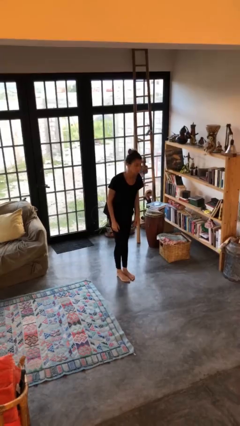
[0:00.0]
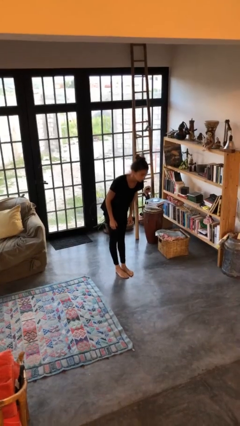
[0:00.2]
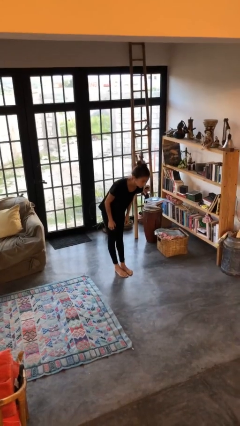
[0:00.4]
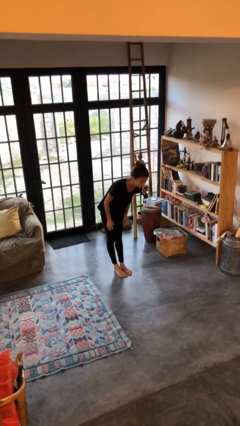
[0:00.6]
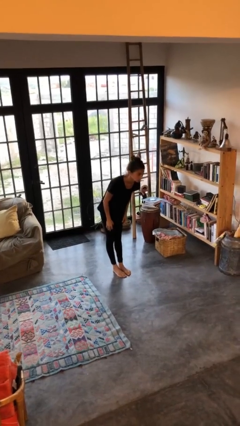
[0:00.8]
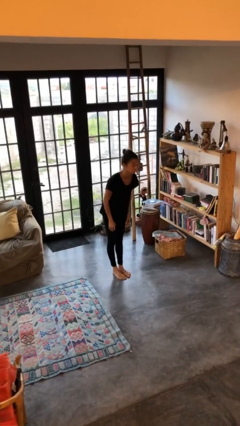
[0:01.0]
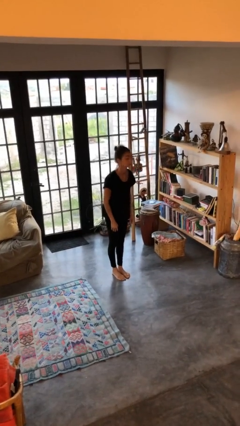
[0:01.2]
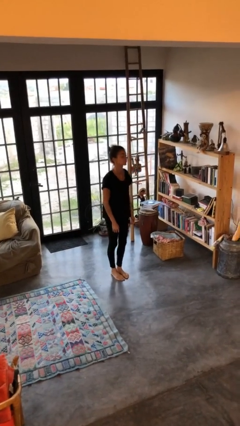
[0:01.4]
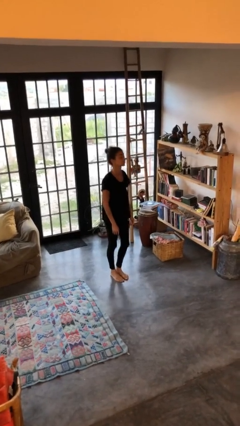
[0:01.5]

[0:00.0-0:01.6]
person bows

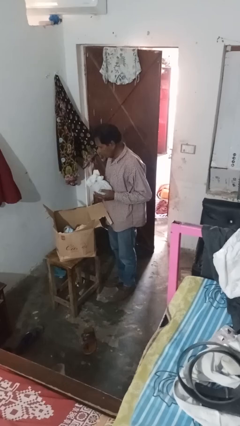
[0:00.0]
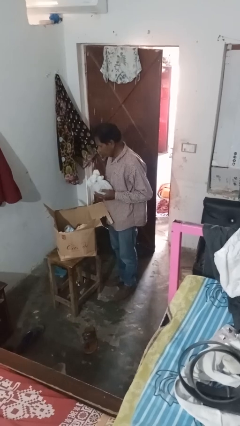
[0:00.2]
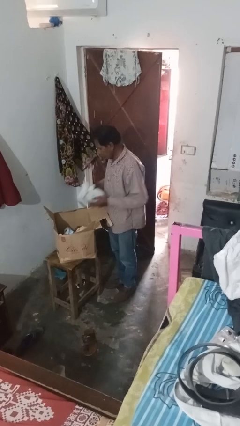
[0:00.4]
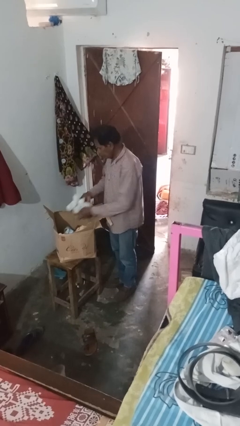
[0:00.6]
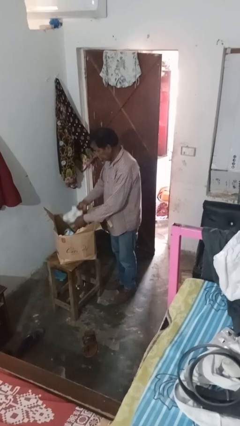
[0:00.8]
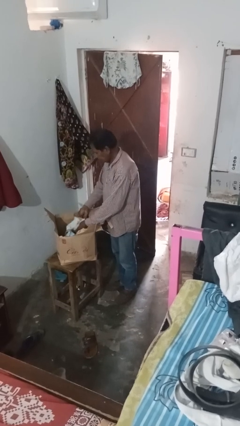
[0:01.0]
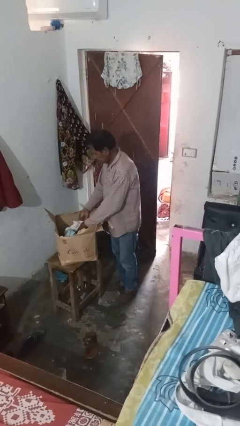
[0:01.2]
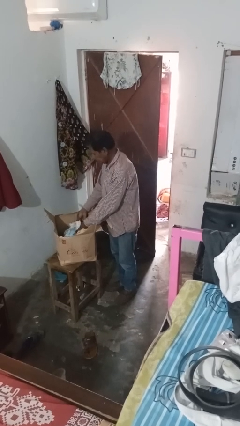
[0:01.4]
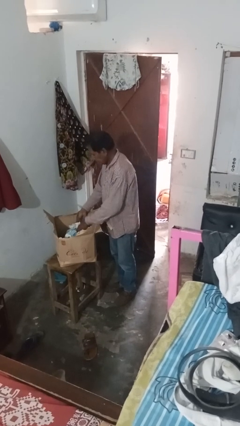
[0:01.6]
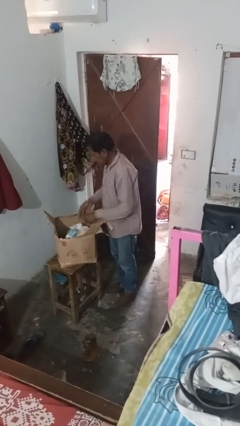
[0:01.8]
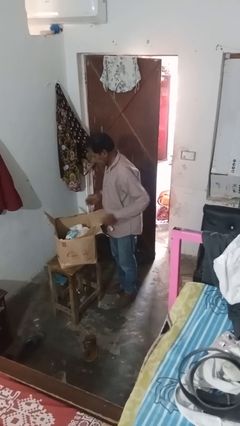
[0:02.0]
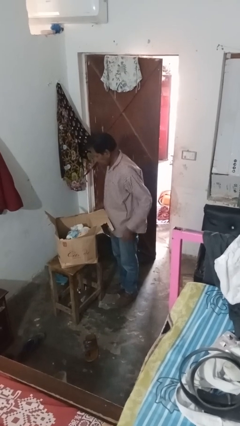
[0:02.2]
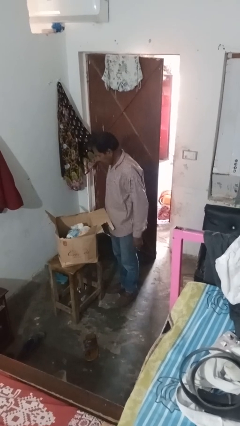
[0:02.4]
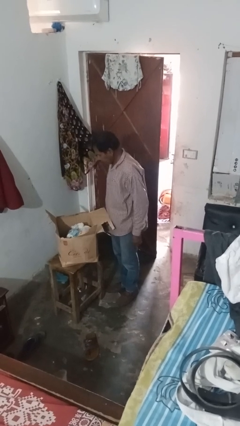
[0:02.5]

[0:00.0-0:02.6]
person puts object into box

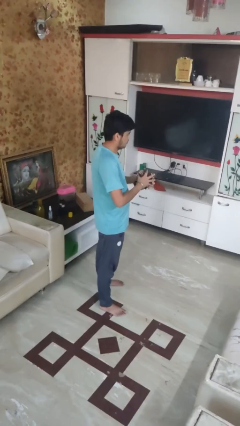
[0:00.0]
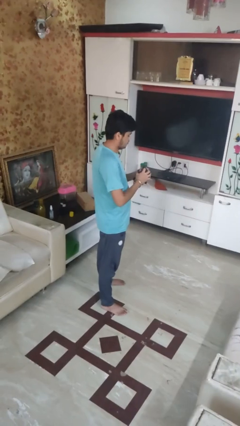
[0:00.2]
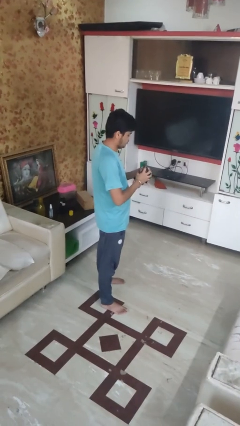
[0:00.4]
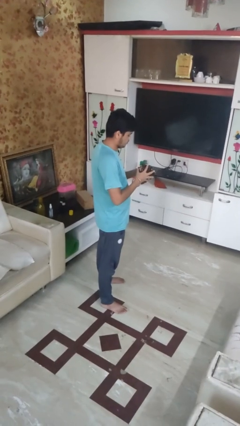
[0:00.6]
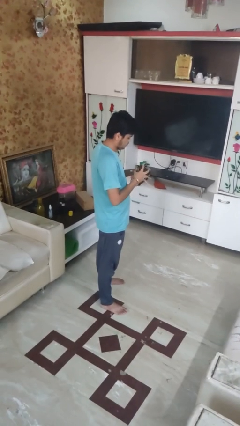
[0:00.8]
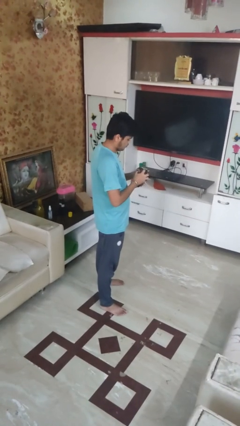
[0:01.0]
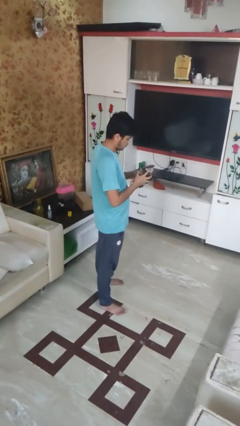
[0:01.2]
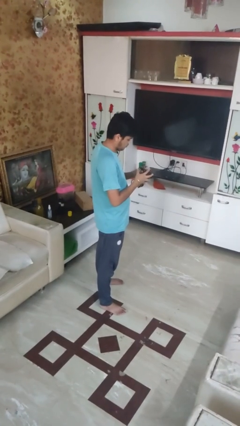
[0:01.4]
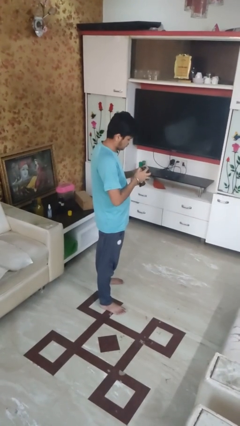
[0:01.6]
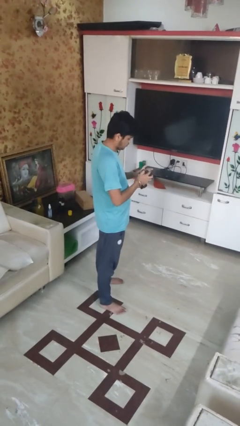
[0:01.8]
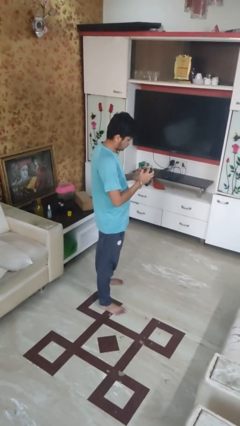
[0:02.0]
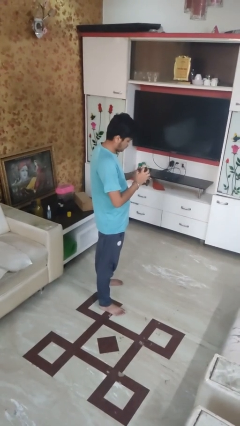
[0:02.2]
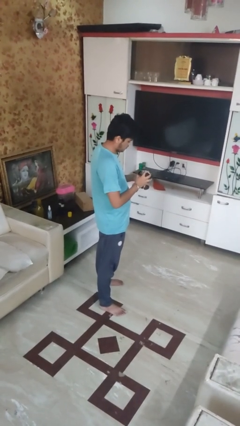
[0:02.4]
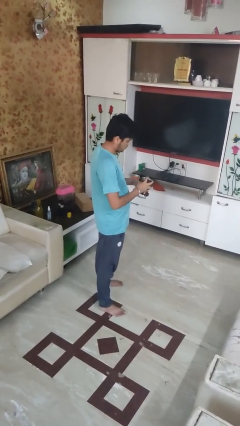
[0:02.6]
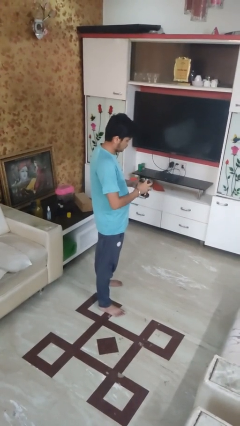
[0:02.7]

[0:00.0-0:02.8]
person squeezes object

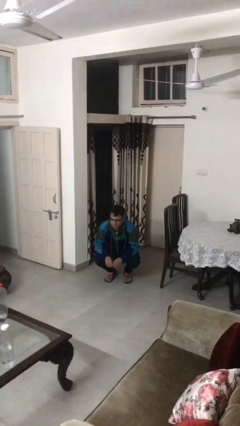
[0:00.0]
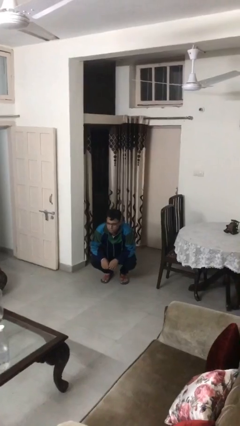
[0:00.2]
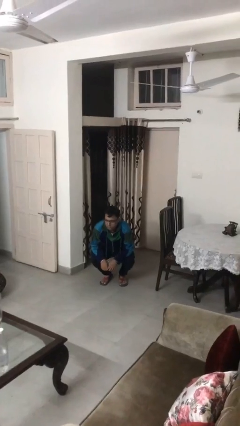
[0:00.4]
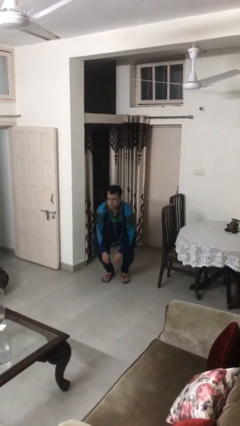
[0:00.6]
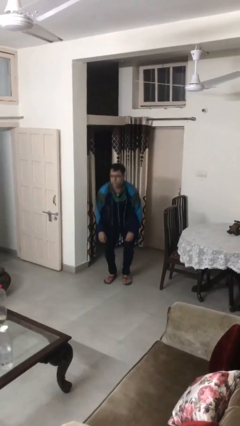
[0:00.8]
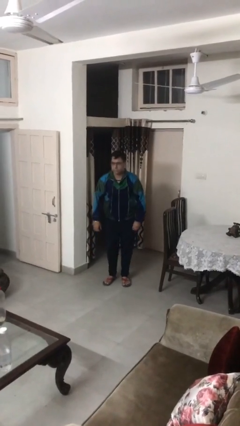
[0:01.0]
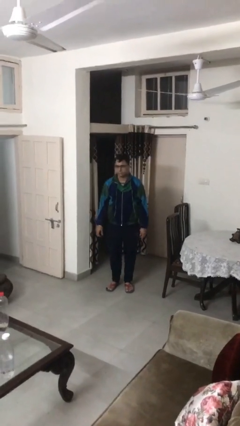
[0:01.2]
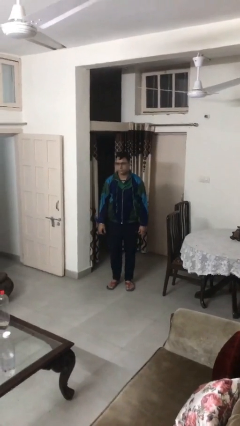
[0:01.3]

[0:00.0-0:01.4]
person stands up

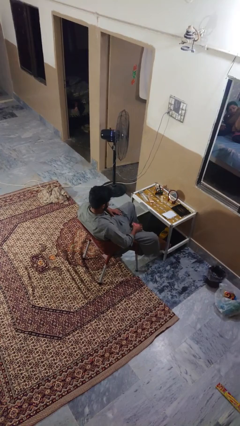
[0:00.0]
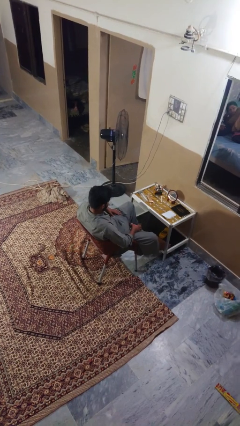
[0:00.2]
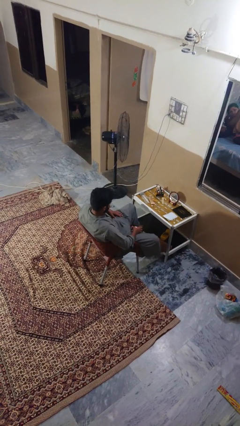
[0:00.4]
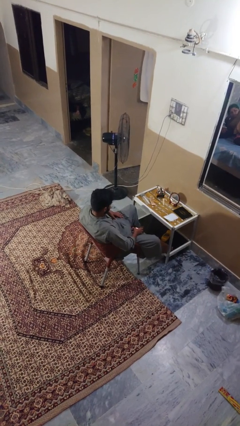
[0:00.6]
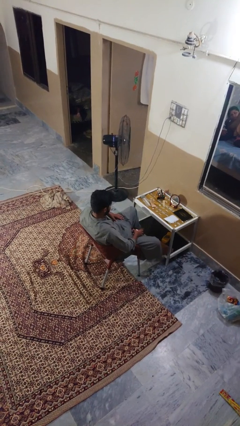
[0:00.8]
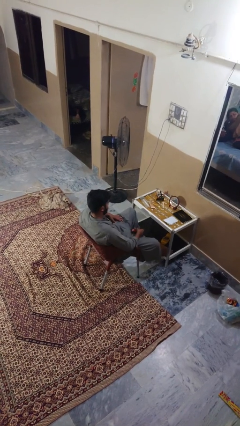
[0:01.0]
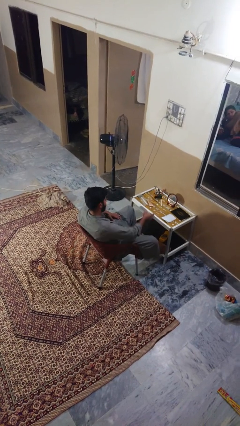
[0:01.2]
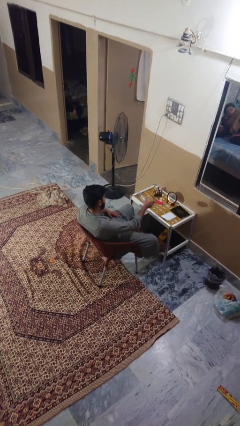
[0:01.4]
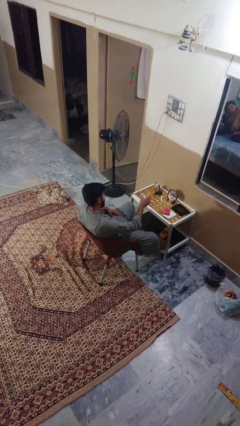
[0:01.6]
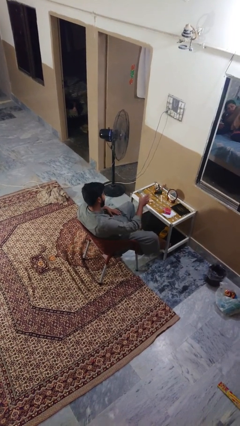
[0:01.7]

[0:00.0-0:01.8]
person throws object on table

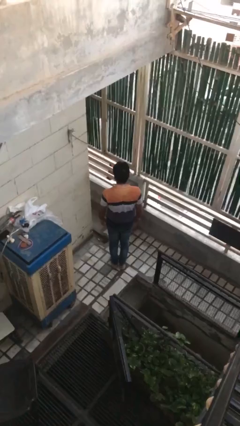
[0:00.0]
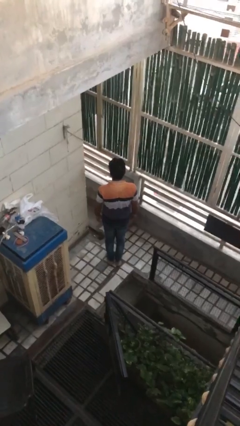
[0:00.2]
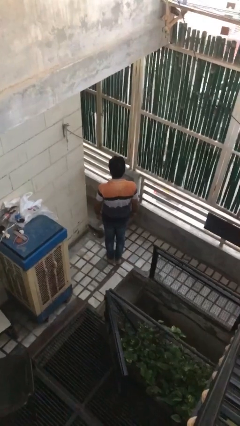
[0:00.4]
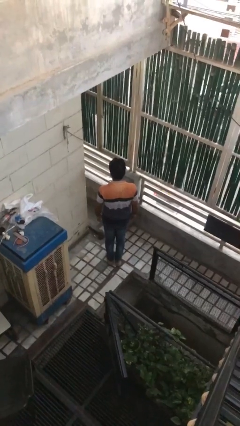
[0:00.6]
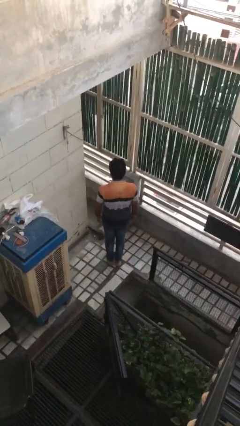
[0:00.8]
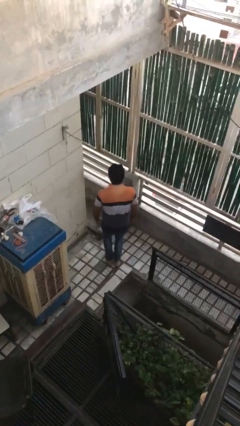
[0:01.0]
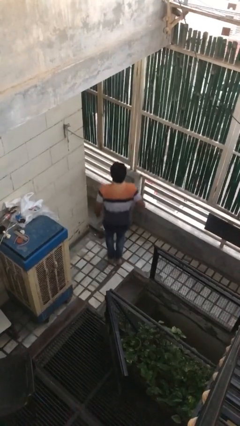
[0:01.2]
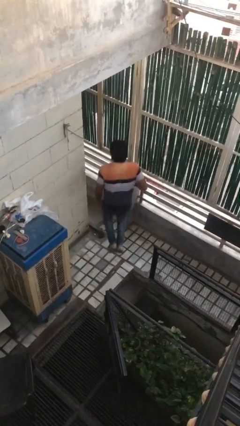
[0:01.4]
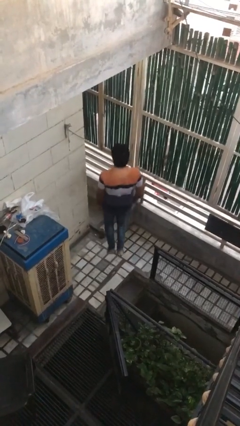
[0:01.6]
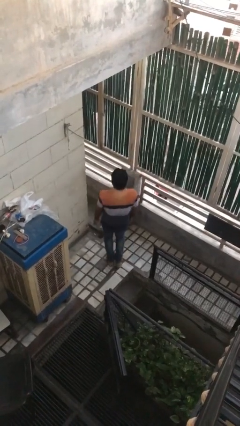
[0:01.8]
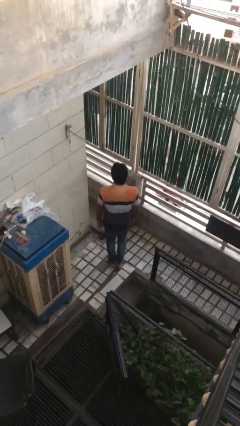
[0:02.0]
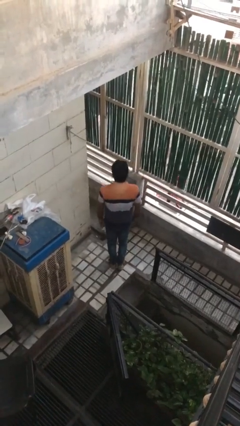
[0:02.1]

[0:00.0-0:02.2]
person jumps

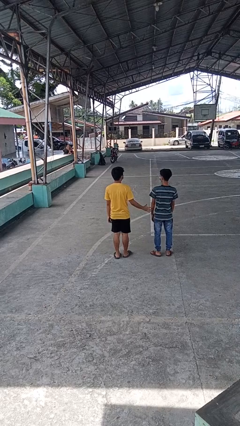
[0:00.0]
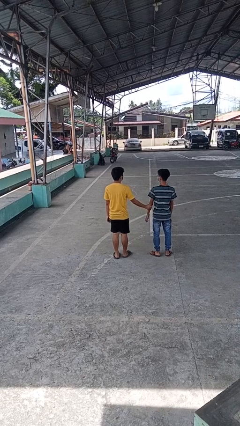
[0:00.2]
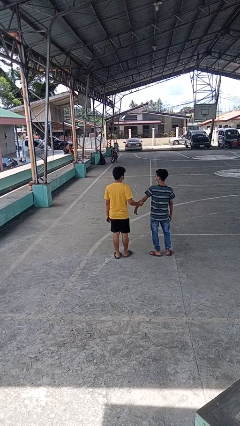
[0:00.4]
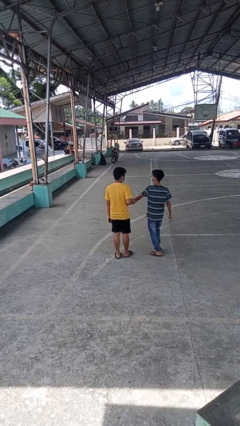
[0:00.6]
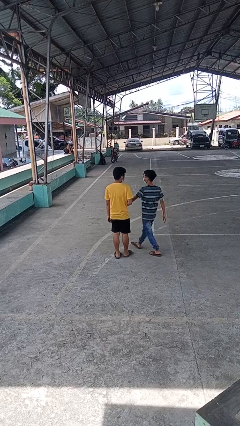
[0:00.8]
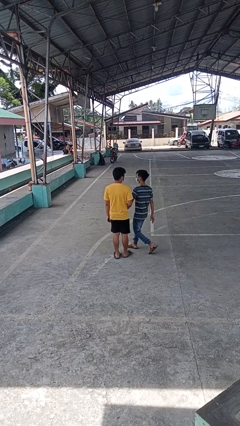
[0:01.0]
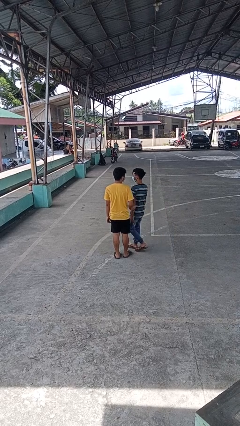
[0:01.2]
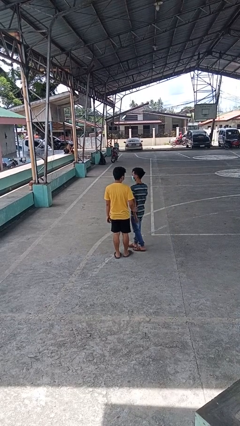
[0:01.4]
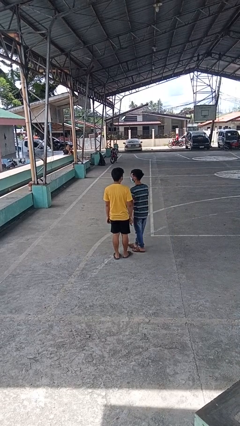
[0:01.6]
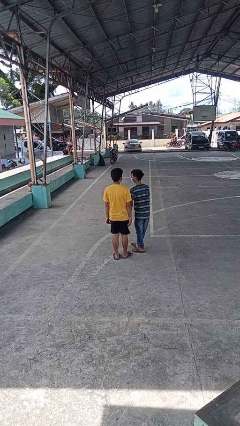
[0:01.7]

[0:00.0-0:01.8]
person grabs person by forearm

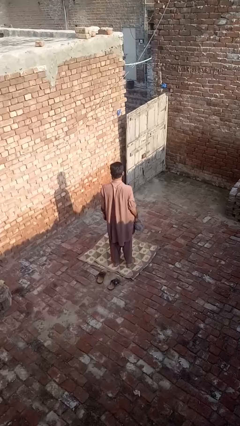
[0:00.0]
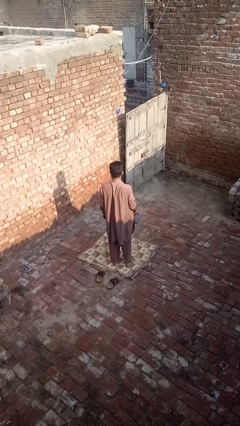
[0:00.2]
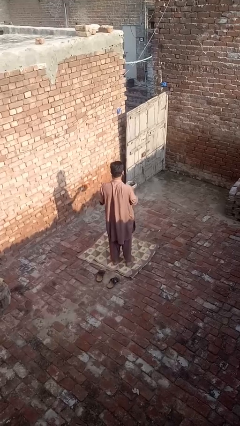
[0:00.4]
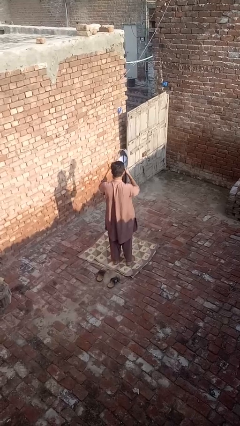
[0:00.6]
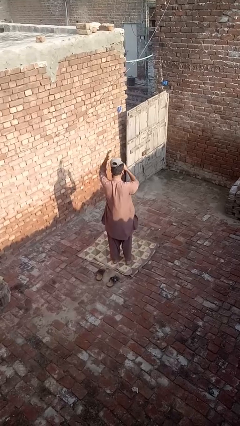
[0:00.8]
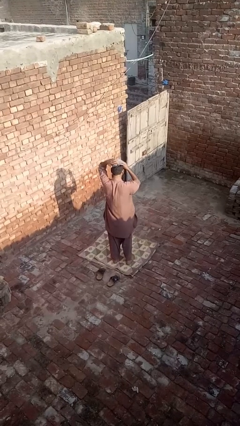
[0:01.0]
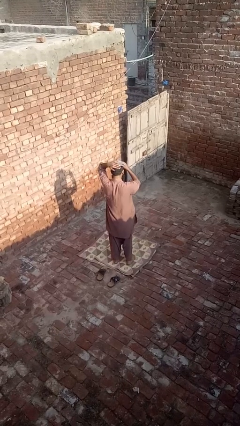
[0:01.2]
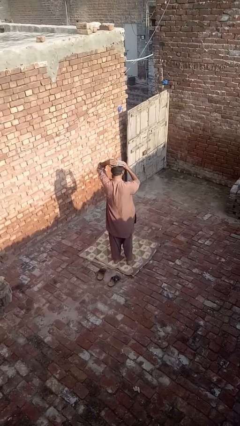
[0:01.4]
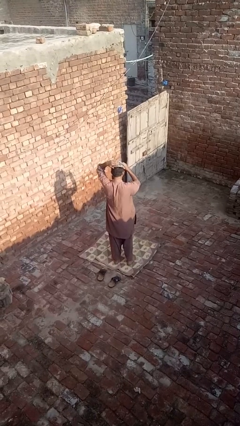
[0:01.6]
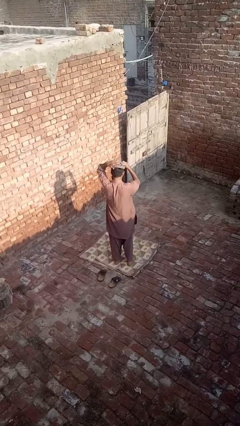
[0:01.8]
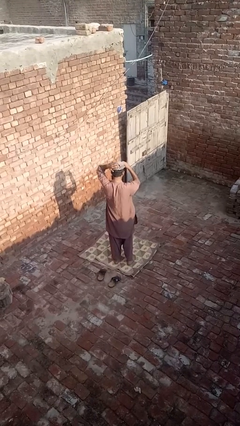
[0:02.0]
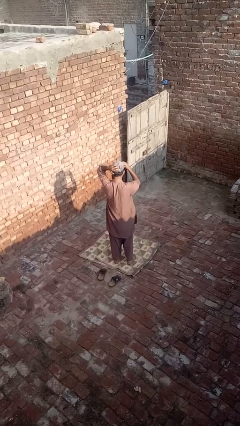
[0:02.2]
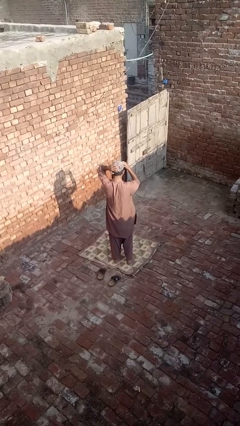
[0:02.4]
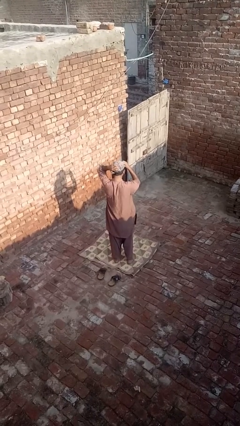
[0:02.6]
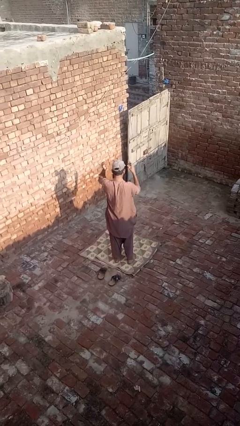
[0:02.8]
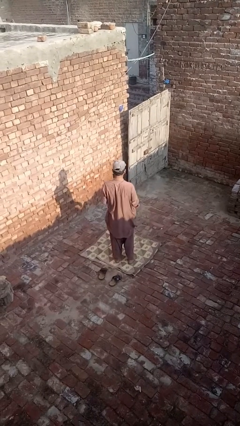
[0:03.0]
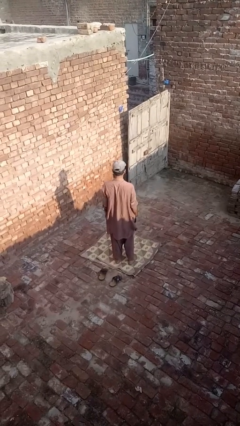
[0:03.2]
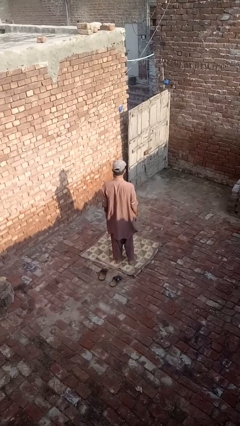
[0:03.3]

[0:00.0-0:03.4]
person puts on hat
